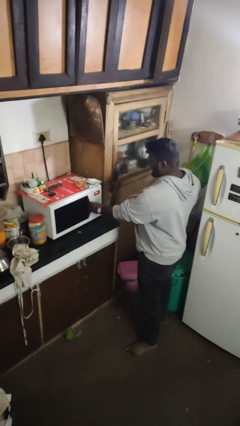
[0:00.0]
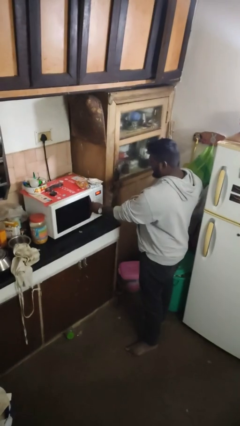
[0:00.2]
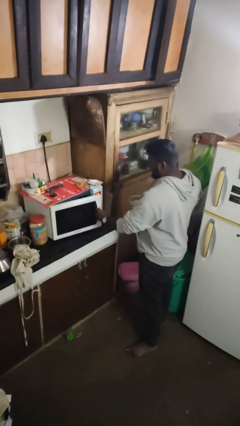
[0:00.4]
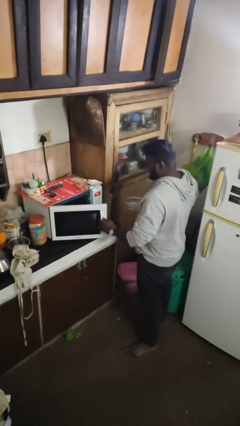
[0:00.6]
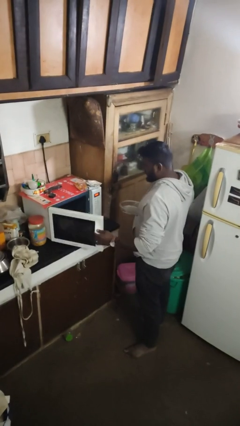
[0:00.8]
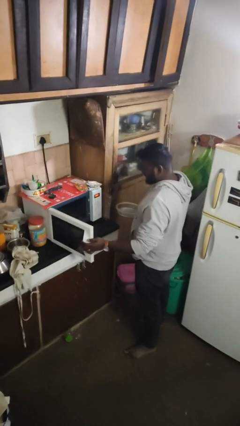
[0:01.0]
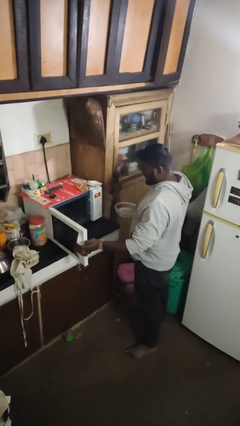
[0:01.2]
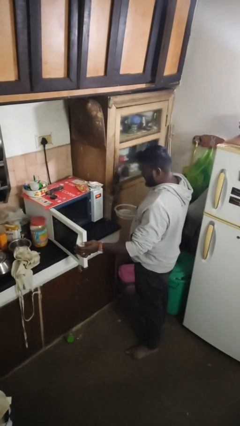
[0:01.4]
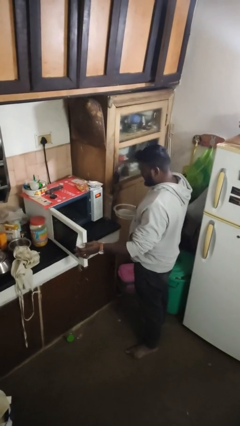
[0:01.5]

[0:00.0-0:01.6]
person opens microwave

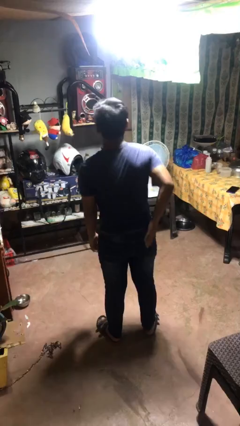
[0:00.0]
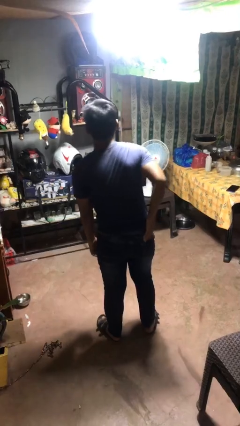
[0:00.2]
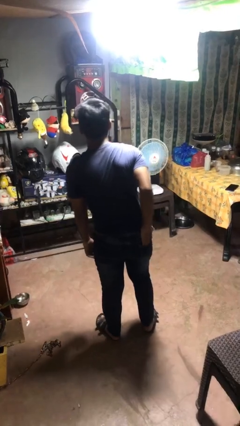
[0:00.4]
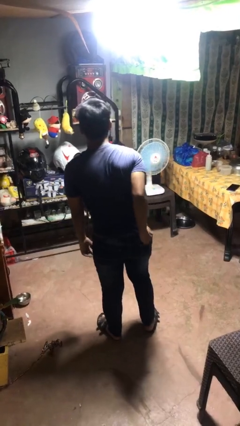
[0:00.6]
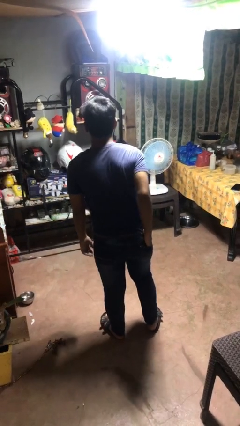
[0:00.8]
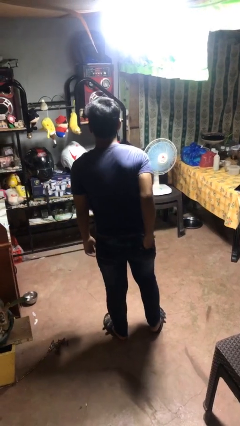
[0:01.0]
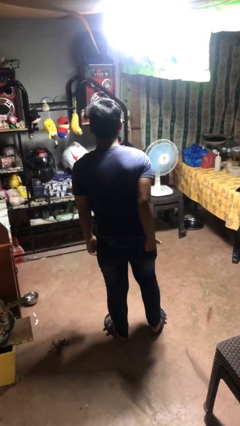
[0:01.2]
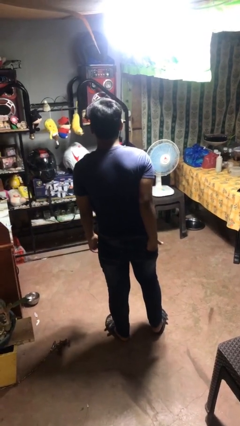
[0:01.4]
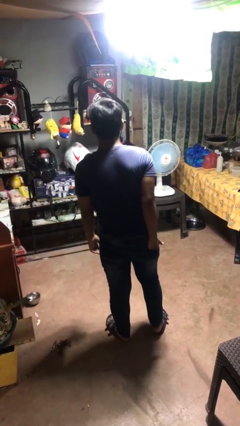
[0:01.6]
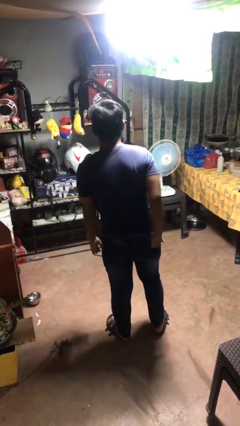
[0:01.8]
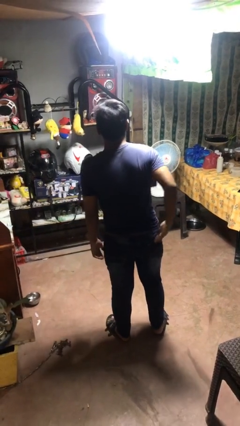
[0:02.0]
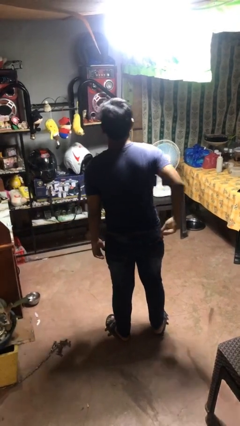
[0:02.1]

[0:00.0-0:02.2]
person puts hands in back pockets

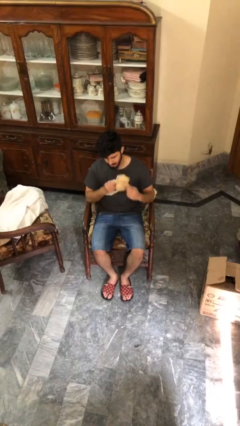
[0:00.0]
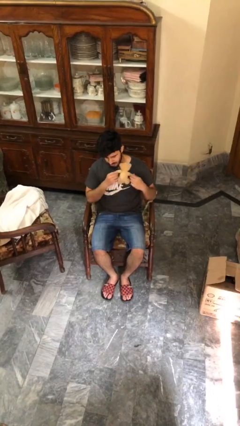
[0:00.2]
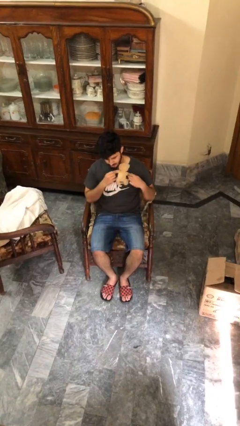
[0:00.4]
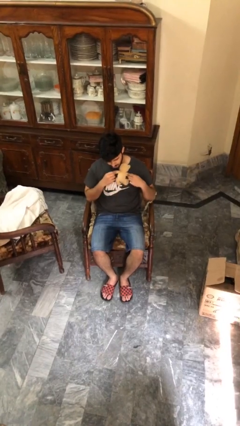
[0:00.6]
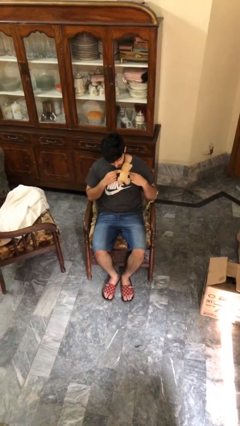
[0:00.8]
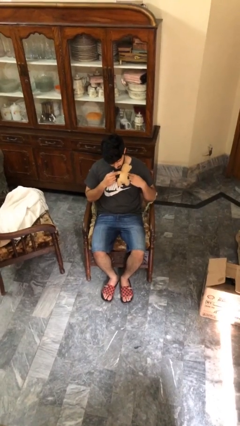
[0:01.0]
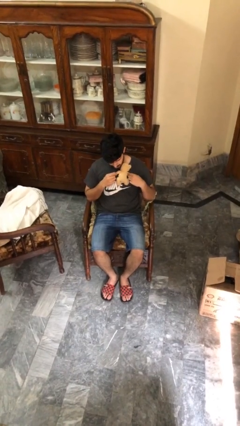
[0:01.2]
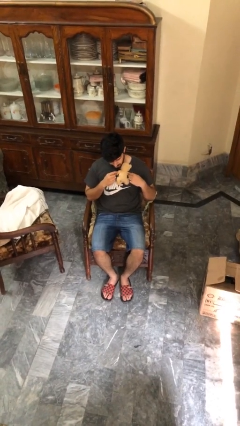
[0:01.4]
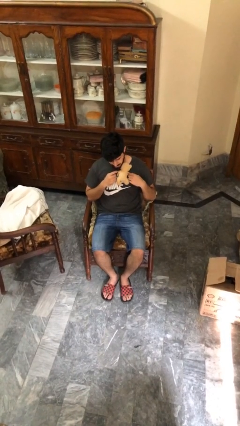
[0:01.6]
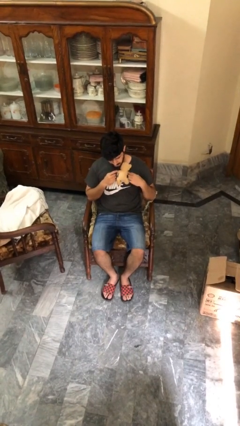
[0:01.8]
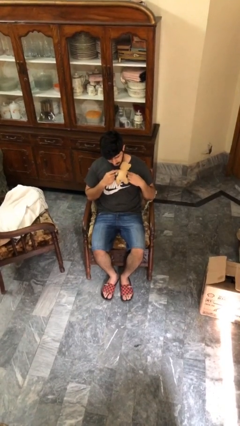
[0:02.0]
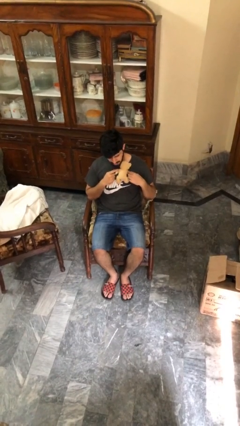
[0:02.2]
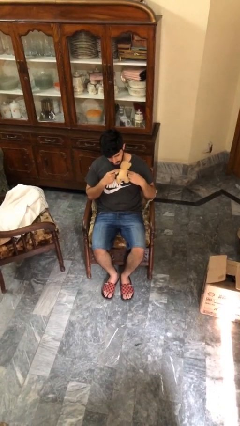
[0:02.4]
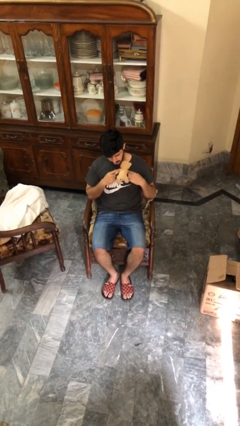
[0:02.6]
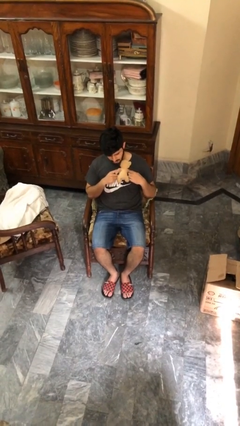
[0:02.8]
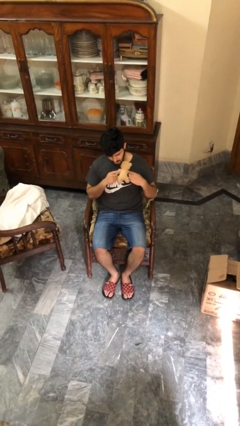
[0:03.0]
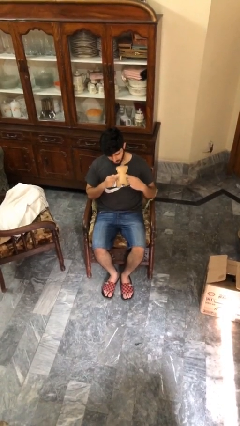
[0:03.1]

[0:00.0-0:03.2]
person hugs stuffed animal

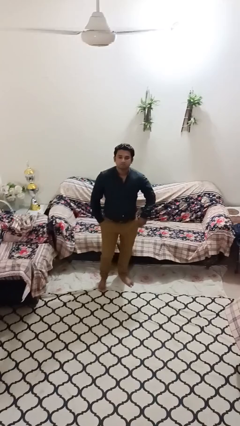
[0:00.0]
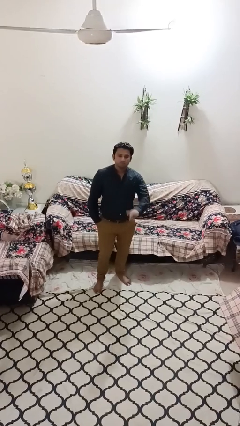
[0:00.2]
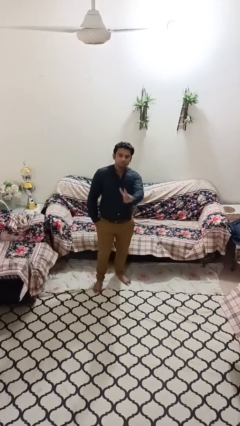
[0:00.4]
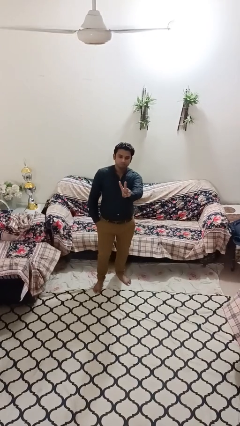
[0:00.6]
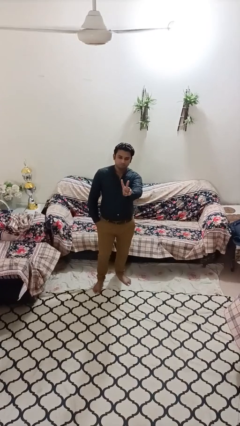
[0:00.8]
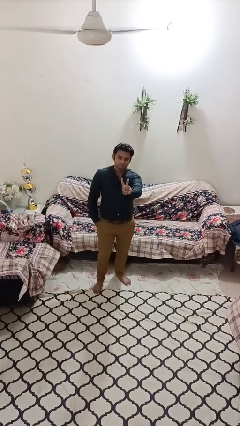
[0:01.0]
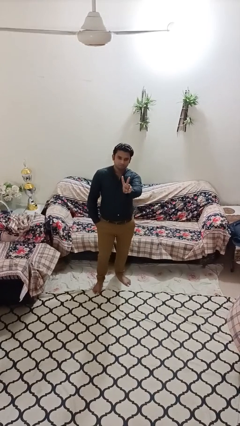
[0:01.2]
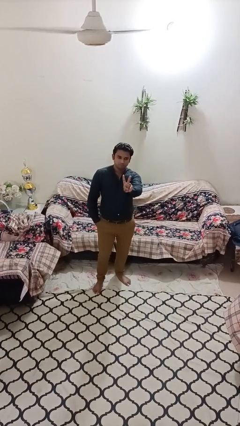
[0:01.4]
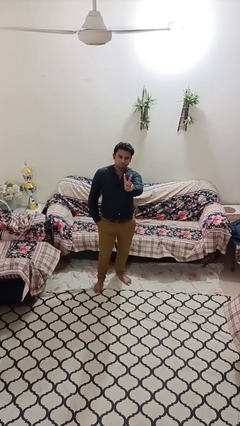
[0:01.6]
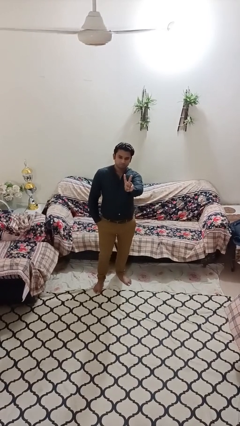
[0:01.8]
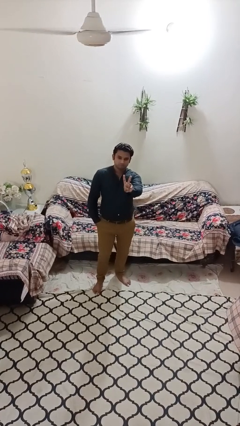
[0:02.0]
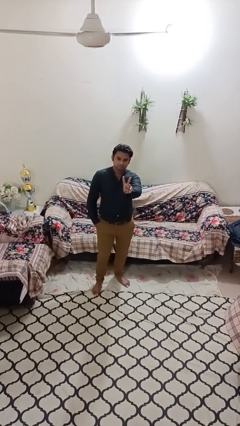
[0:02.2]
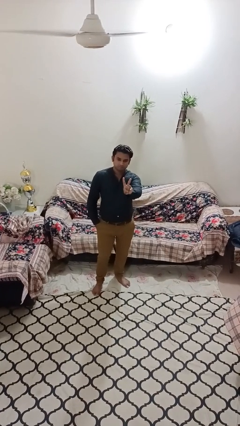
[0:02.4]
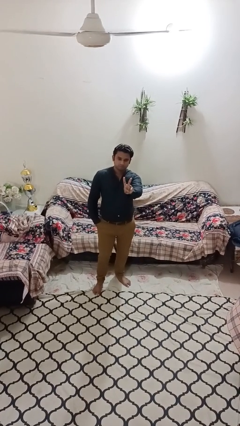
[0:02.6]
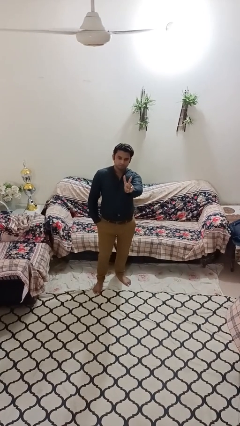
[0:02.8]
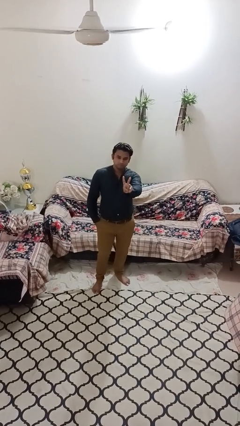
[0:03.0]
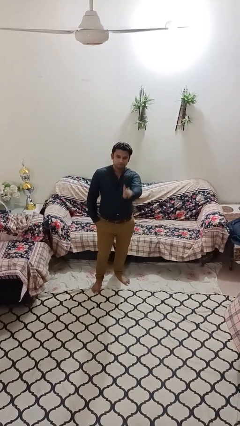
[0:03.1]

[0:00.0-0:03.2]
person gestures peace

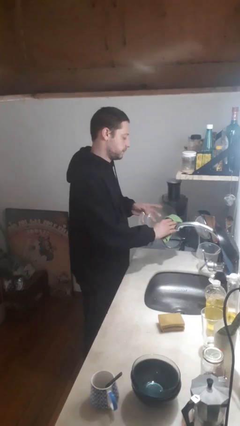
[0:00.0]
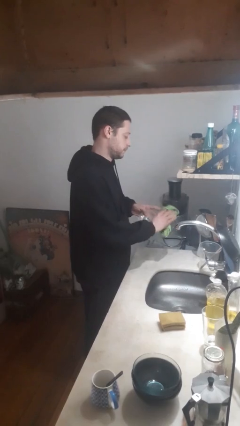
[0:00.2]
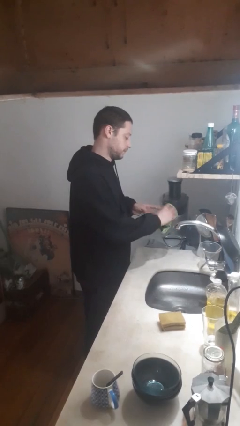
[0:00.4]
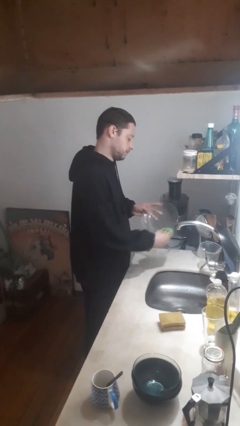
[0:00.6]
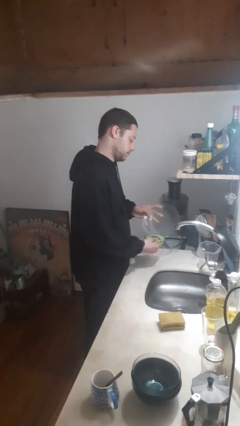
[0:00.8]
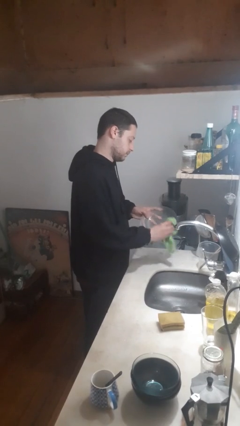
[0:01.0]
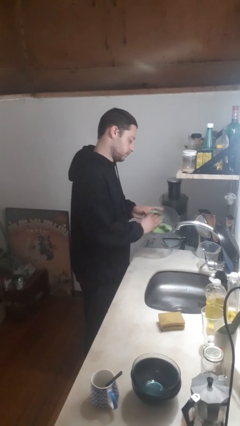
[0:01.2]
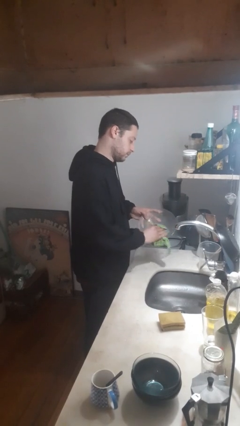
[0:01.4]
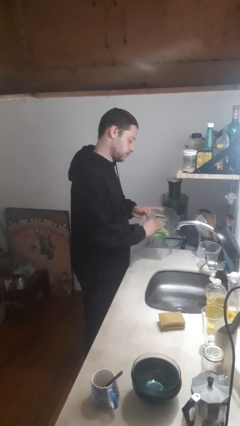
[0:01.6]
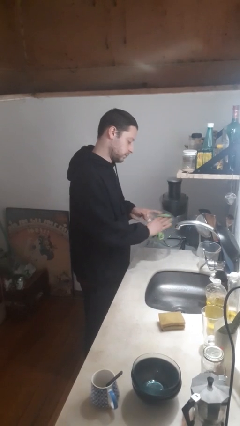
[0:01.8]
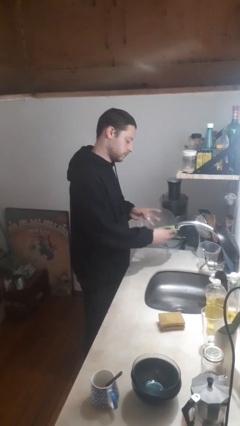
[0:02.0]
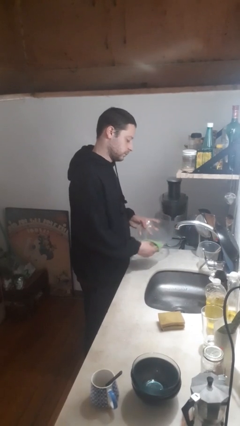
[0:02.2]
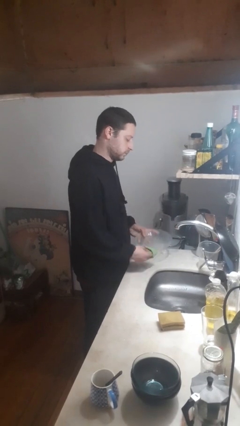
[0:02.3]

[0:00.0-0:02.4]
person dries dish

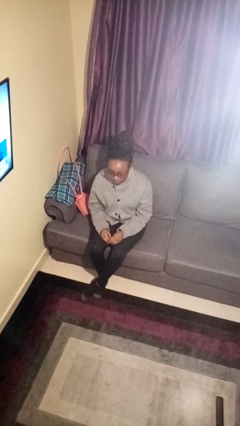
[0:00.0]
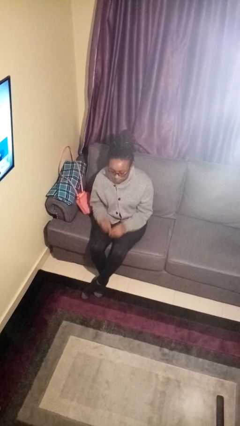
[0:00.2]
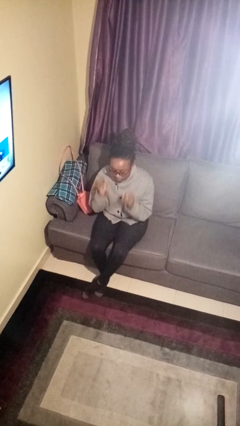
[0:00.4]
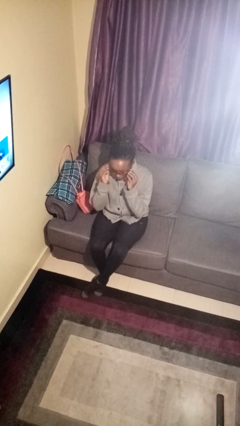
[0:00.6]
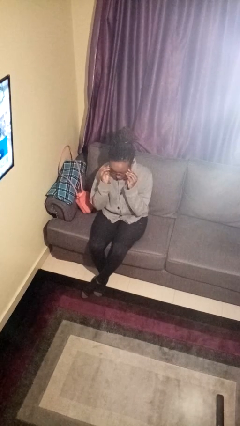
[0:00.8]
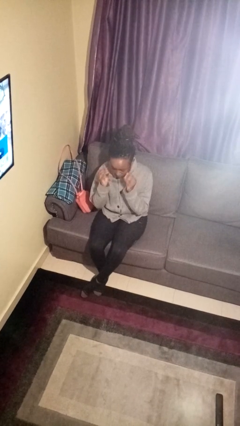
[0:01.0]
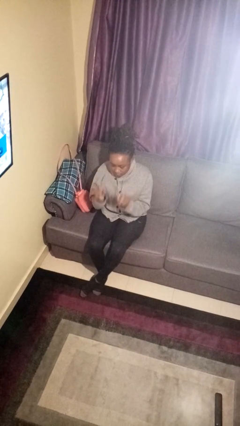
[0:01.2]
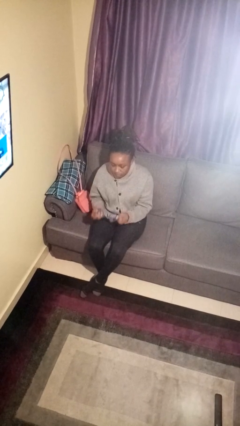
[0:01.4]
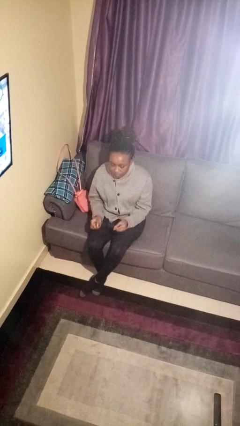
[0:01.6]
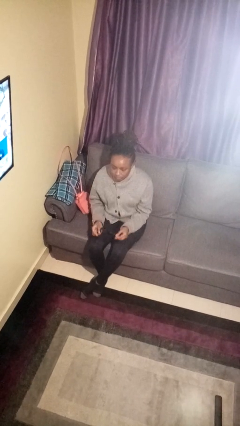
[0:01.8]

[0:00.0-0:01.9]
person takes off glasses

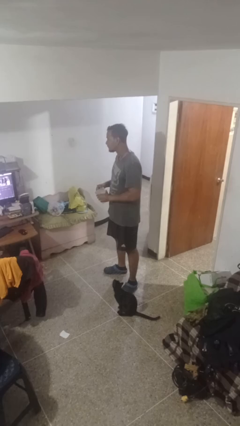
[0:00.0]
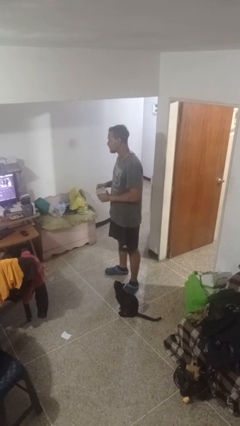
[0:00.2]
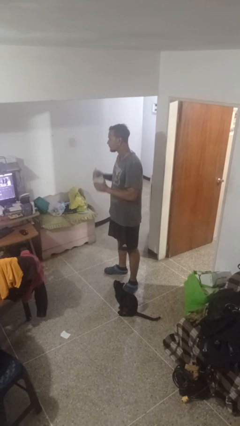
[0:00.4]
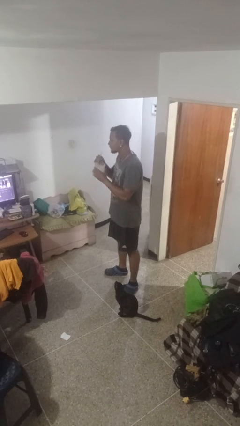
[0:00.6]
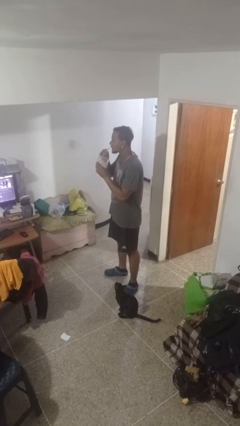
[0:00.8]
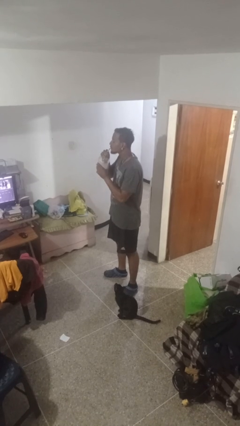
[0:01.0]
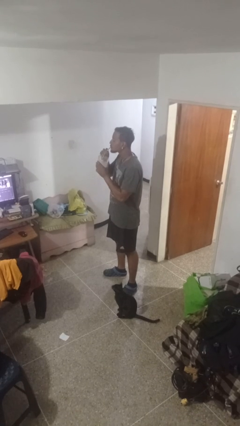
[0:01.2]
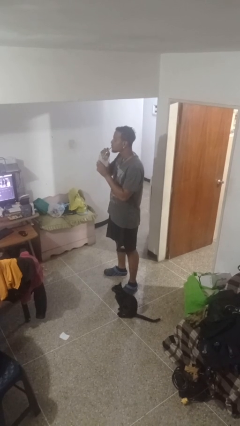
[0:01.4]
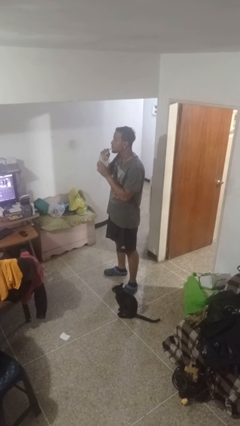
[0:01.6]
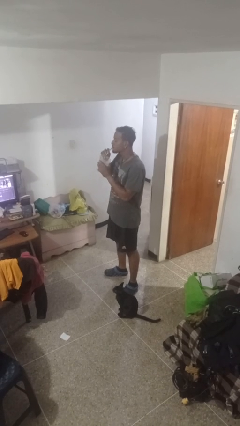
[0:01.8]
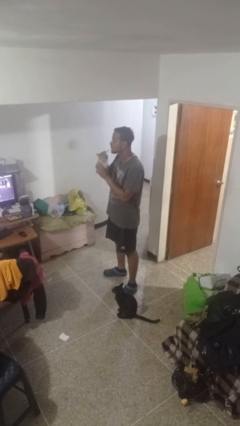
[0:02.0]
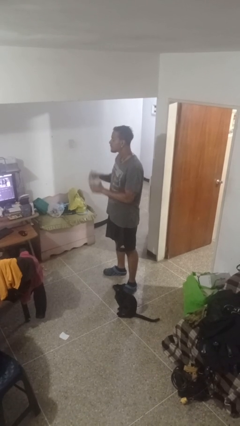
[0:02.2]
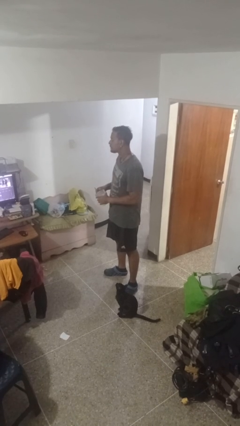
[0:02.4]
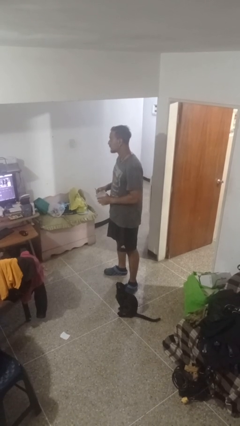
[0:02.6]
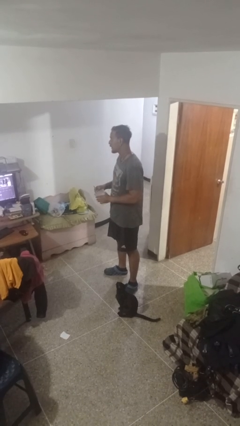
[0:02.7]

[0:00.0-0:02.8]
person drinks from straw
